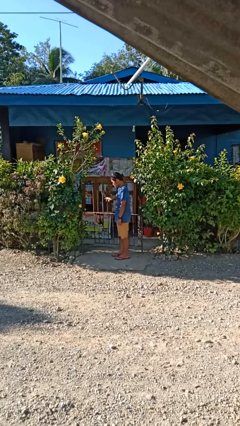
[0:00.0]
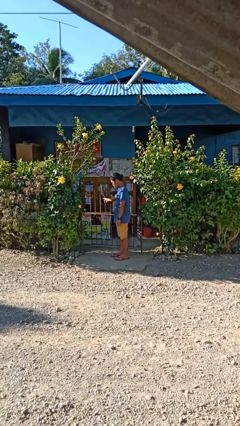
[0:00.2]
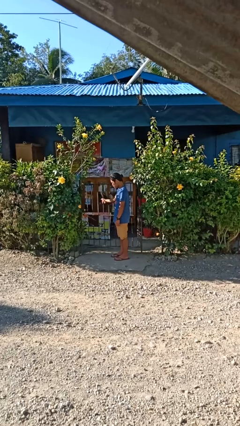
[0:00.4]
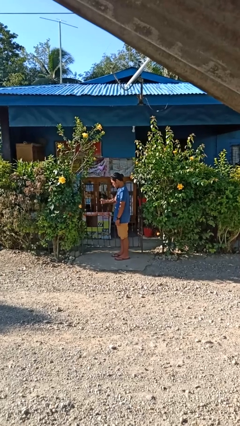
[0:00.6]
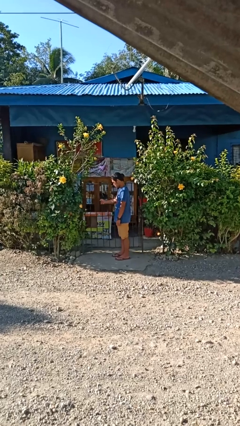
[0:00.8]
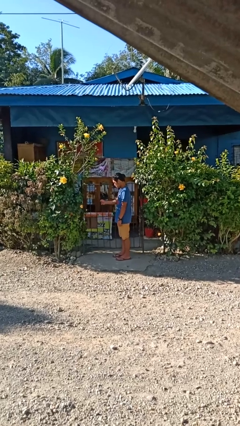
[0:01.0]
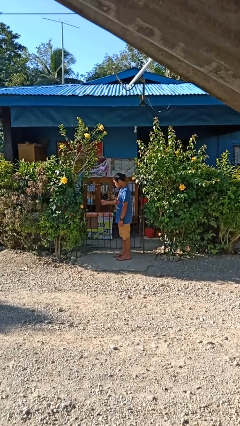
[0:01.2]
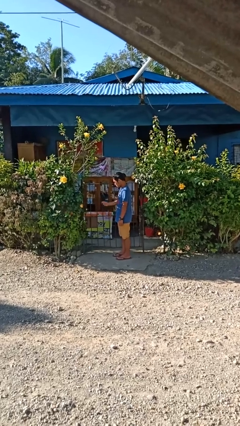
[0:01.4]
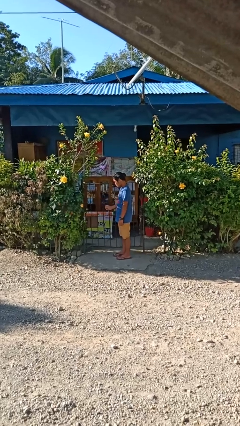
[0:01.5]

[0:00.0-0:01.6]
person closes gate

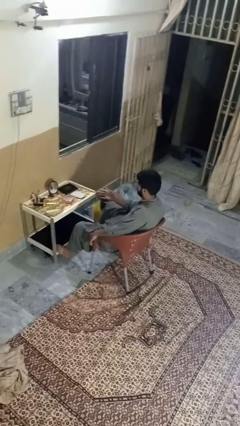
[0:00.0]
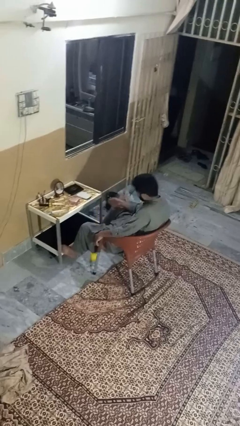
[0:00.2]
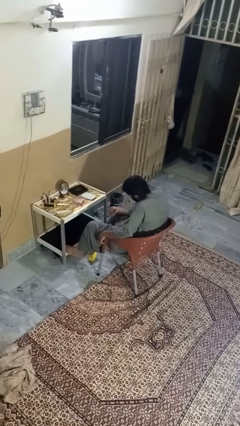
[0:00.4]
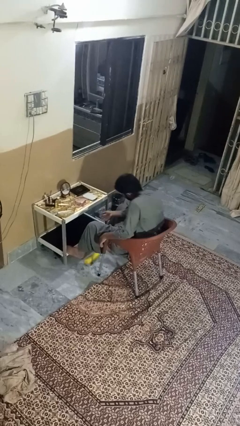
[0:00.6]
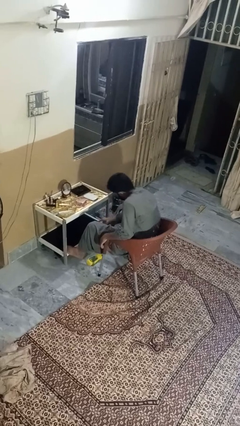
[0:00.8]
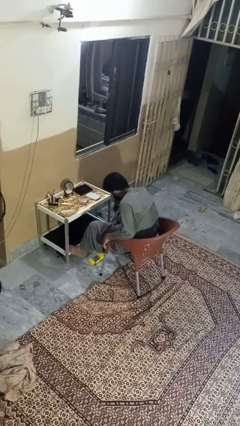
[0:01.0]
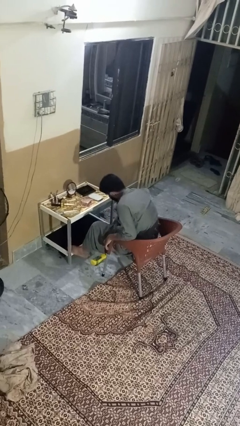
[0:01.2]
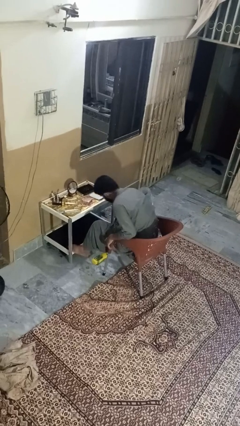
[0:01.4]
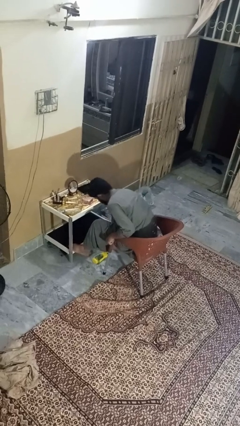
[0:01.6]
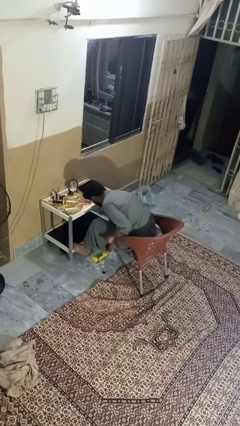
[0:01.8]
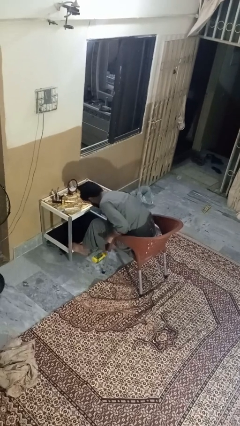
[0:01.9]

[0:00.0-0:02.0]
person throws object to ground

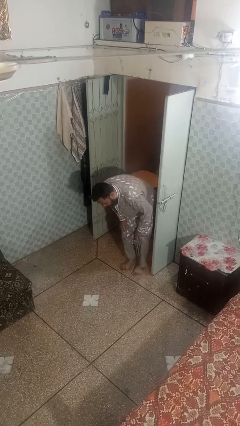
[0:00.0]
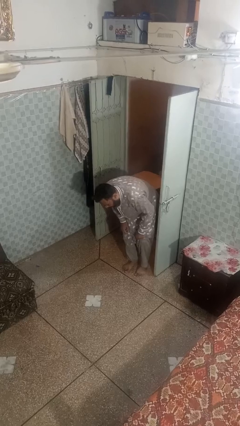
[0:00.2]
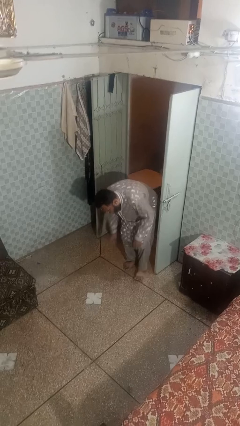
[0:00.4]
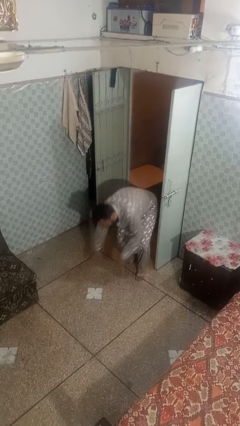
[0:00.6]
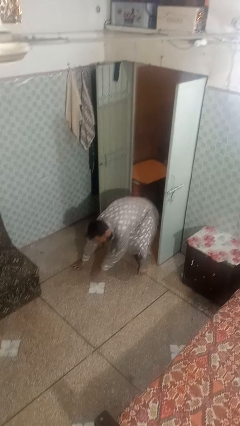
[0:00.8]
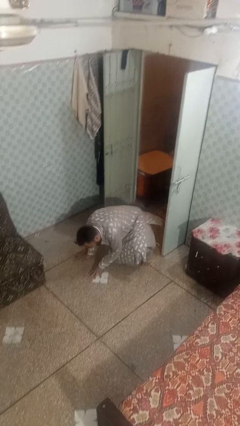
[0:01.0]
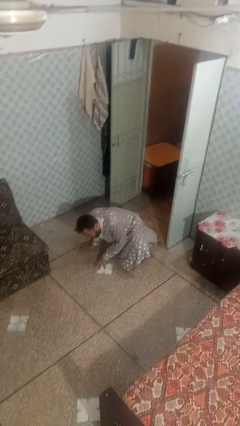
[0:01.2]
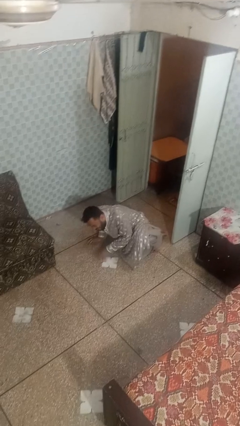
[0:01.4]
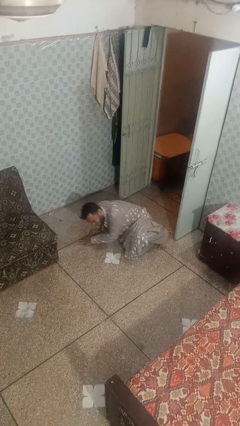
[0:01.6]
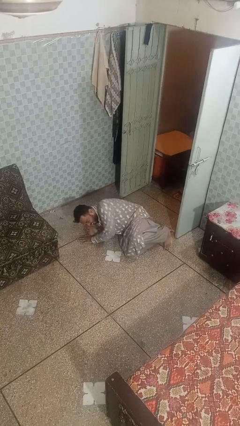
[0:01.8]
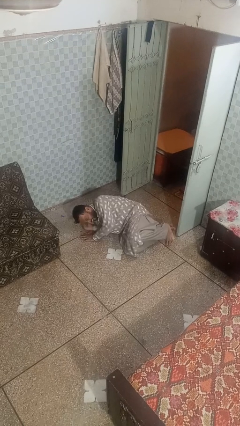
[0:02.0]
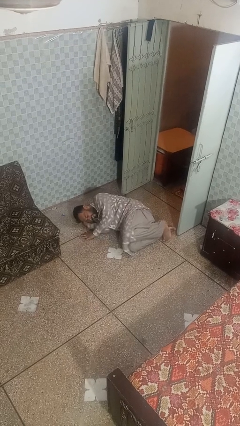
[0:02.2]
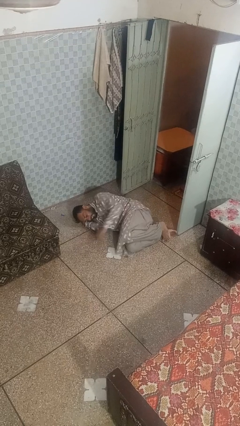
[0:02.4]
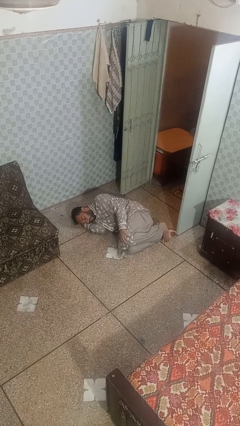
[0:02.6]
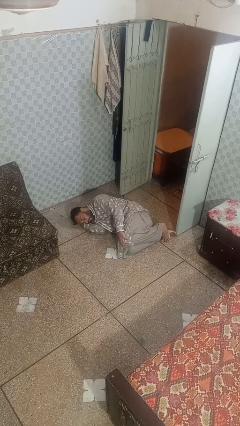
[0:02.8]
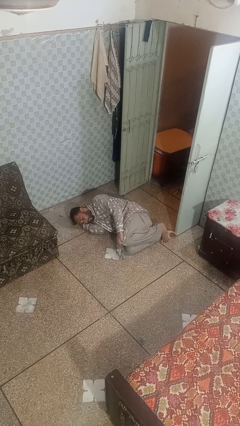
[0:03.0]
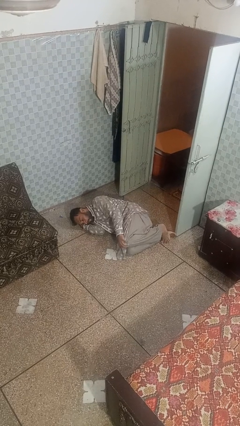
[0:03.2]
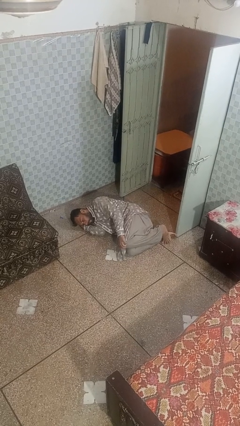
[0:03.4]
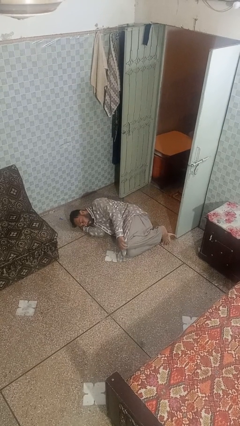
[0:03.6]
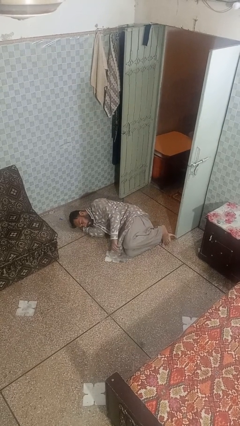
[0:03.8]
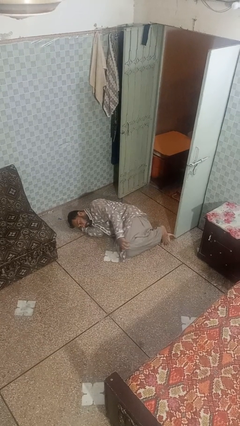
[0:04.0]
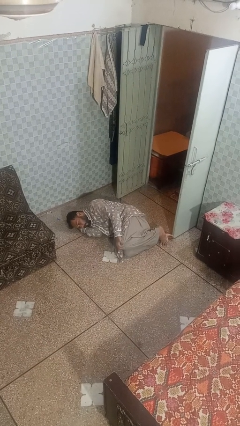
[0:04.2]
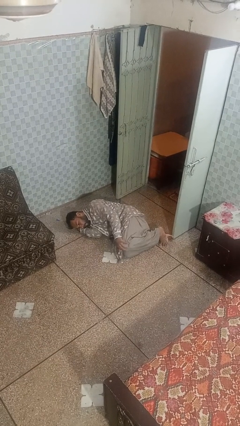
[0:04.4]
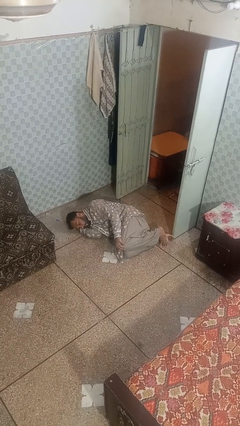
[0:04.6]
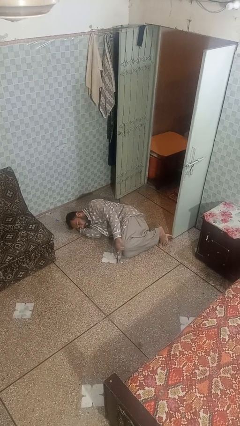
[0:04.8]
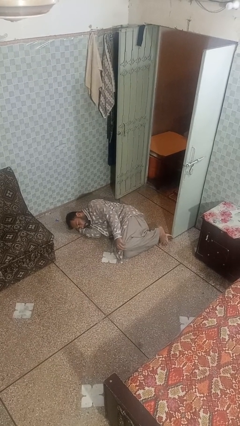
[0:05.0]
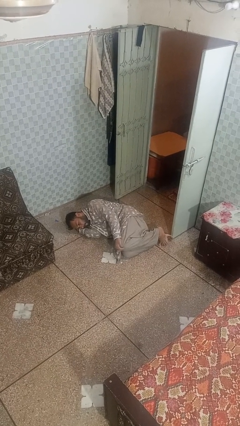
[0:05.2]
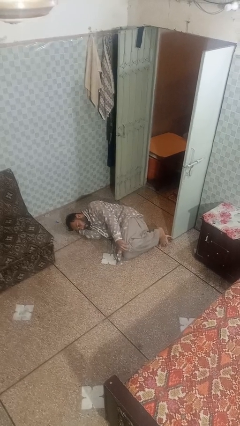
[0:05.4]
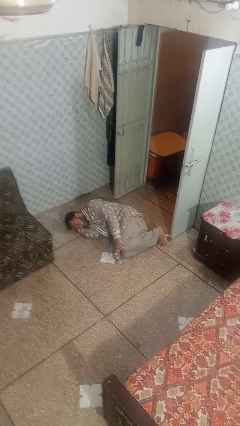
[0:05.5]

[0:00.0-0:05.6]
person lies down on floor

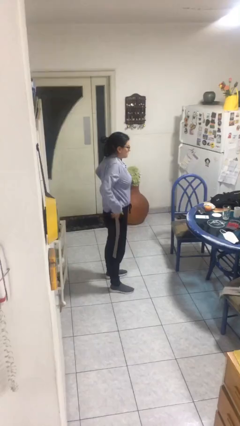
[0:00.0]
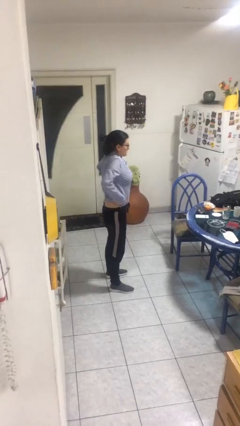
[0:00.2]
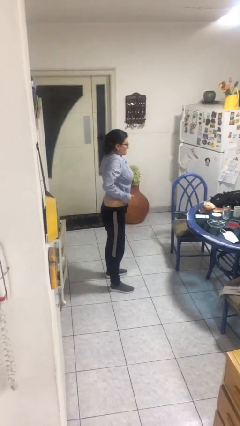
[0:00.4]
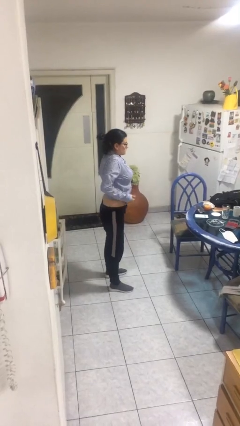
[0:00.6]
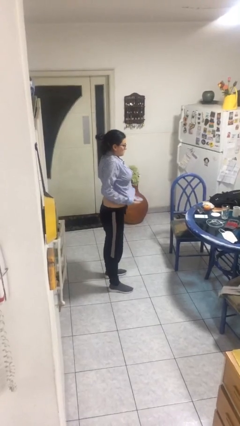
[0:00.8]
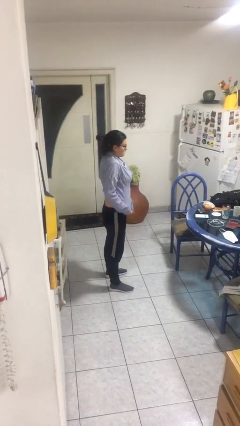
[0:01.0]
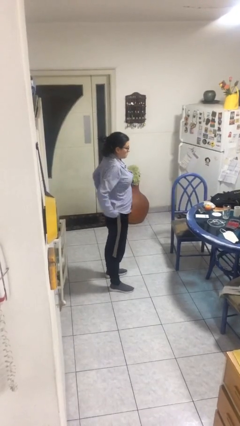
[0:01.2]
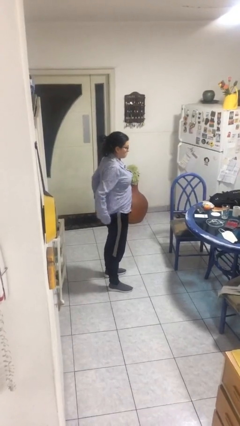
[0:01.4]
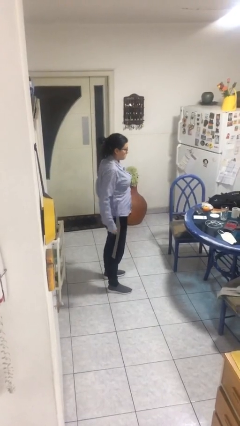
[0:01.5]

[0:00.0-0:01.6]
person untucks shirt

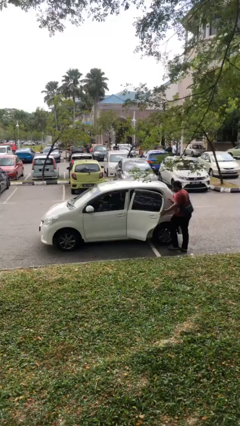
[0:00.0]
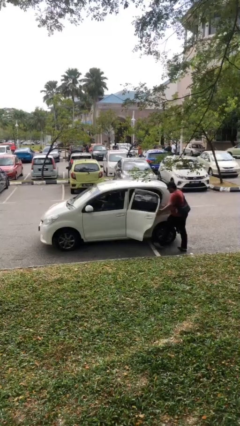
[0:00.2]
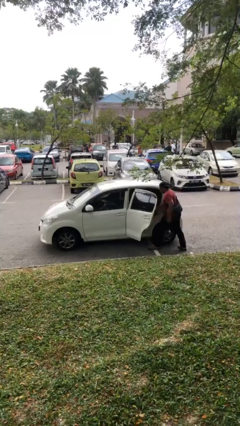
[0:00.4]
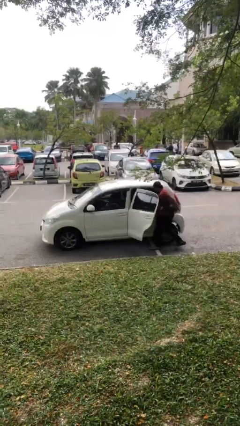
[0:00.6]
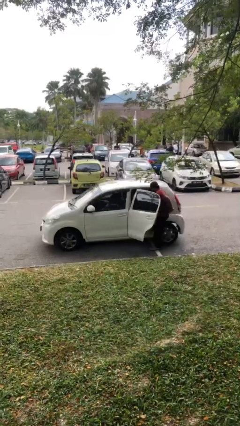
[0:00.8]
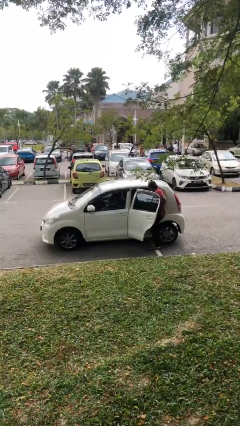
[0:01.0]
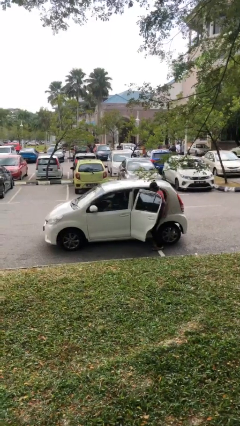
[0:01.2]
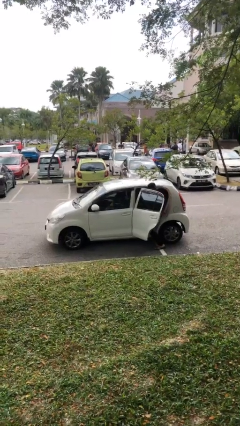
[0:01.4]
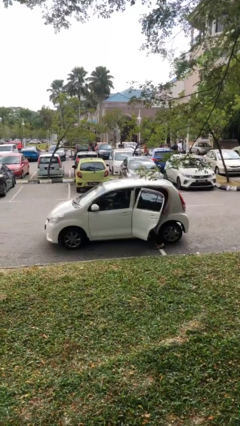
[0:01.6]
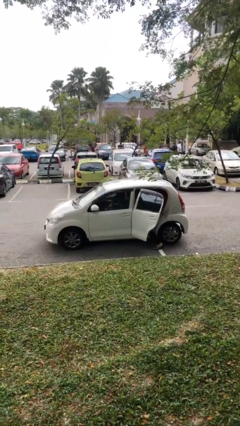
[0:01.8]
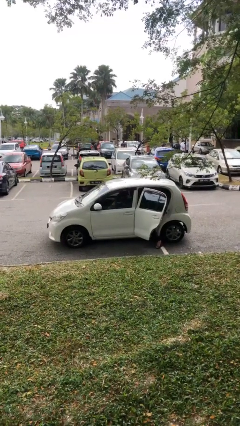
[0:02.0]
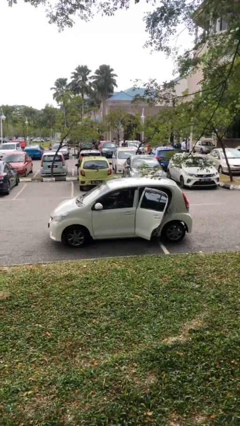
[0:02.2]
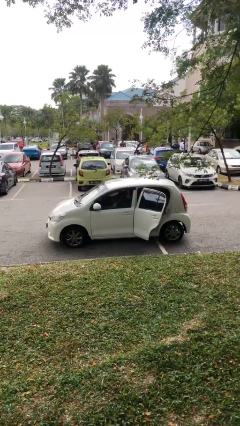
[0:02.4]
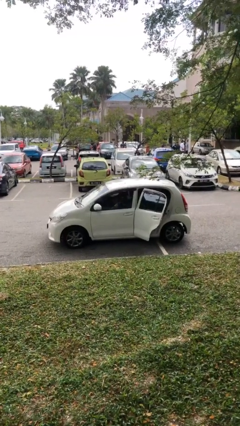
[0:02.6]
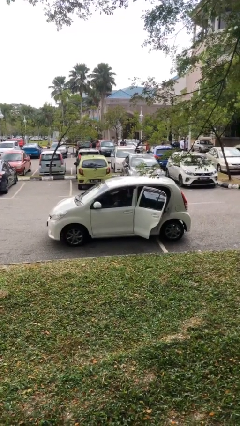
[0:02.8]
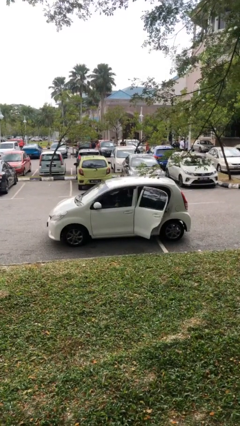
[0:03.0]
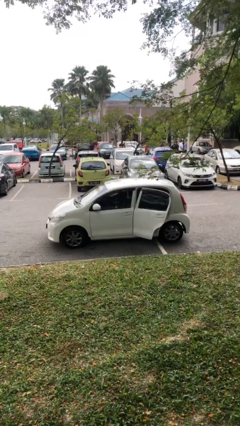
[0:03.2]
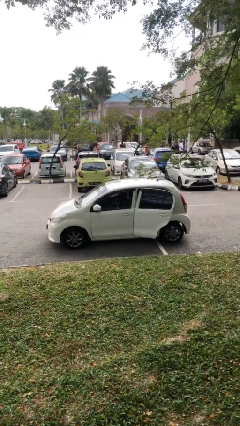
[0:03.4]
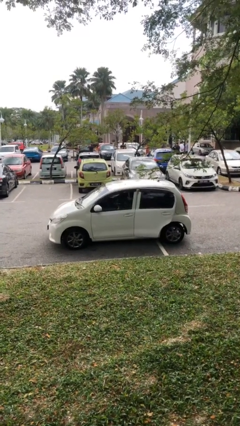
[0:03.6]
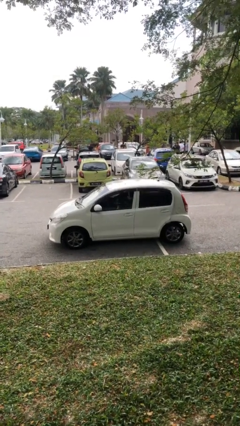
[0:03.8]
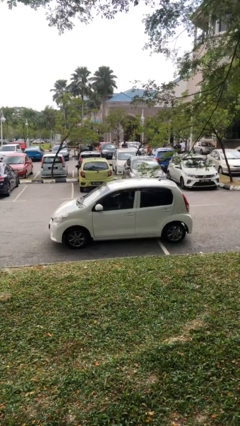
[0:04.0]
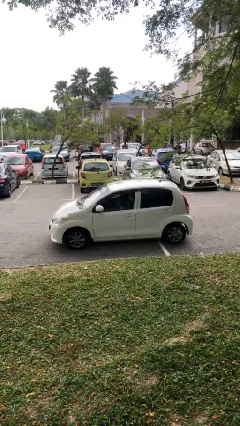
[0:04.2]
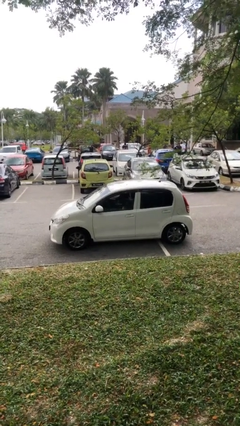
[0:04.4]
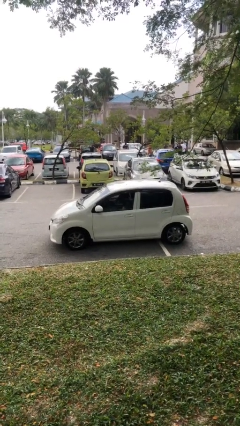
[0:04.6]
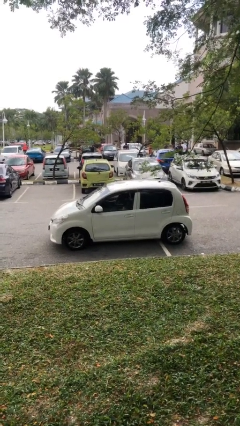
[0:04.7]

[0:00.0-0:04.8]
car picks up person

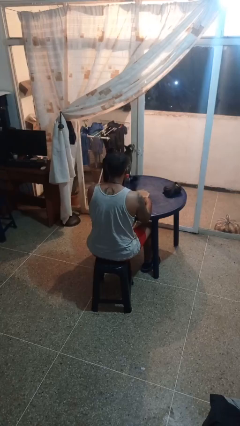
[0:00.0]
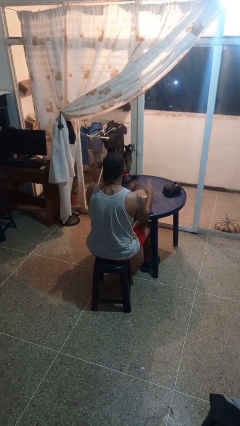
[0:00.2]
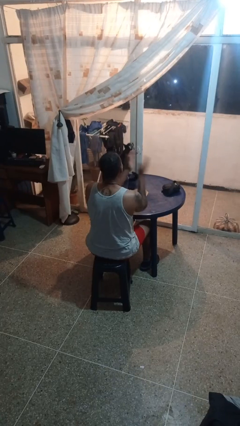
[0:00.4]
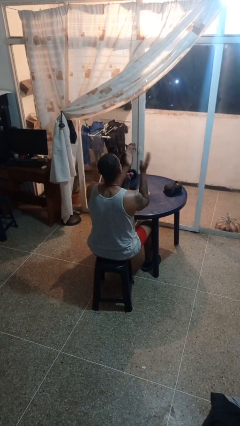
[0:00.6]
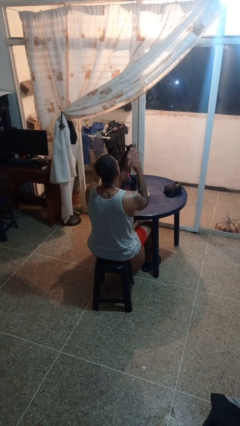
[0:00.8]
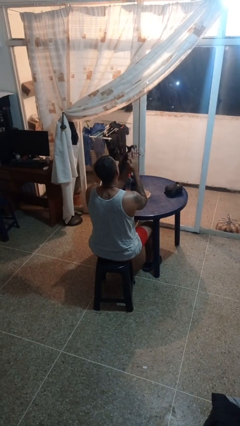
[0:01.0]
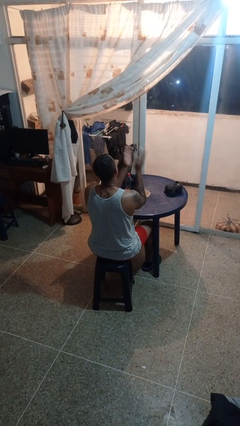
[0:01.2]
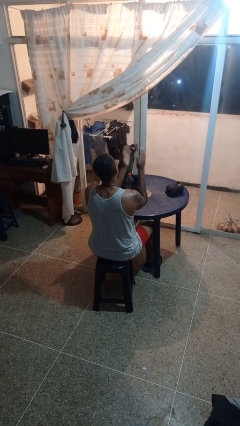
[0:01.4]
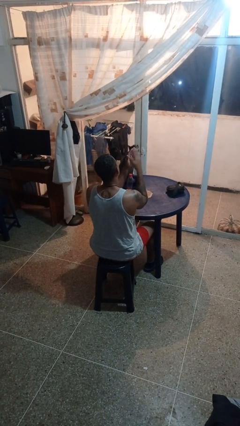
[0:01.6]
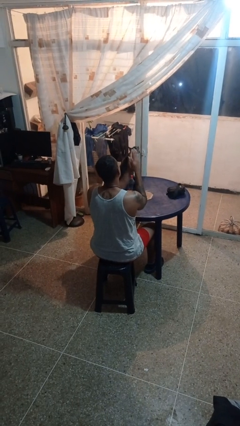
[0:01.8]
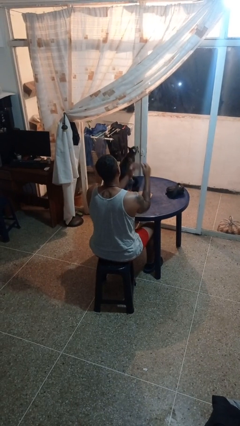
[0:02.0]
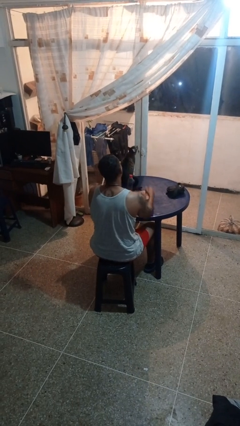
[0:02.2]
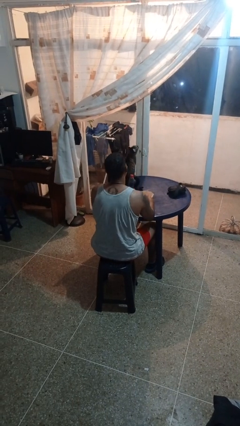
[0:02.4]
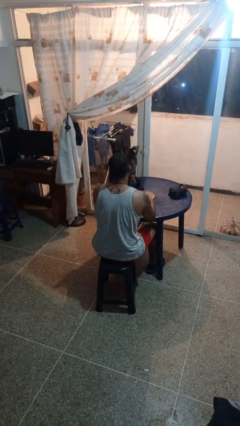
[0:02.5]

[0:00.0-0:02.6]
person claps hands
